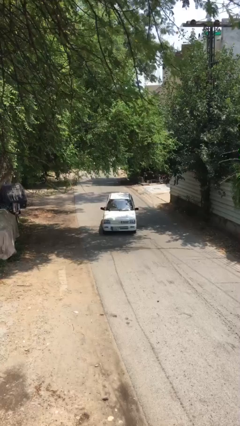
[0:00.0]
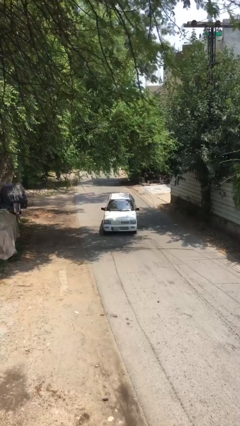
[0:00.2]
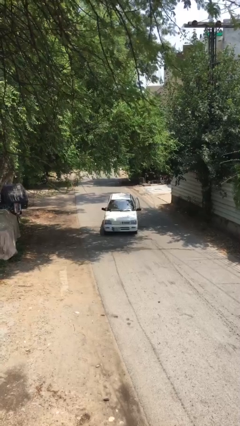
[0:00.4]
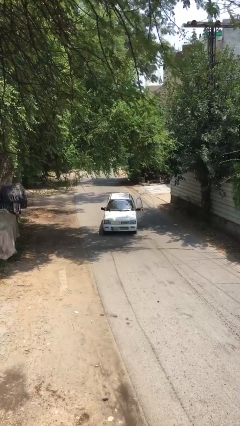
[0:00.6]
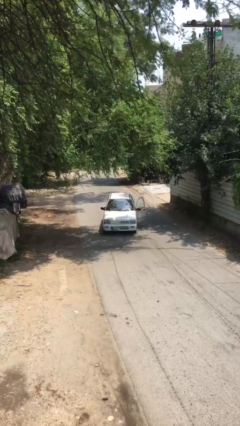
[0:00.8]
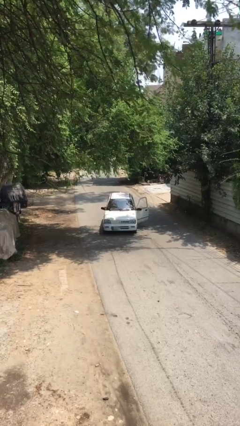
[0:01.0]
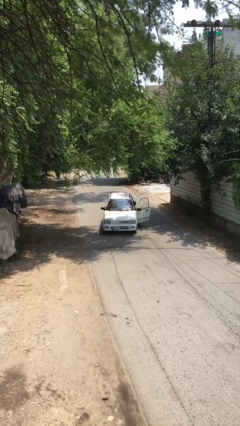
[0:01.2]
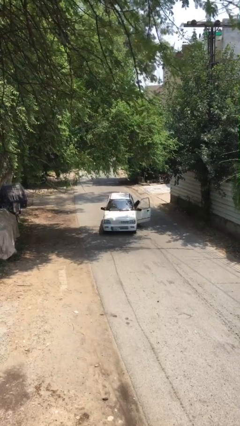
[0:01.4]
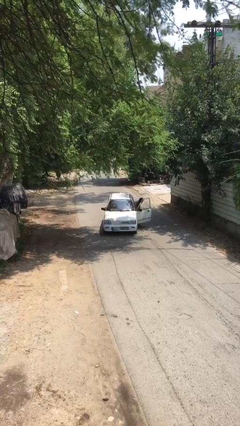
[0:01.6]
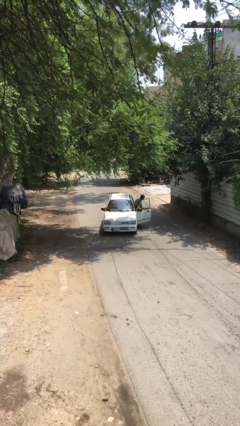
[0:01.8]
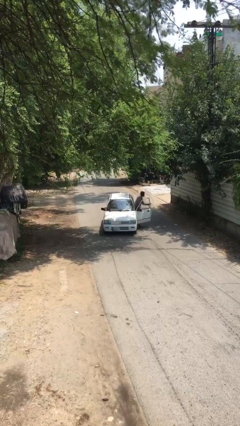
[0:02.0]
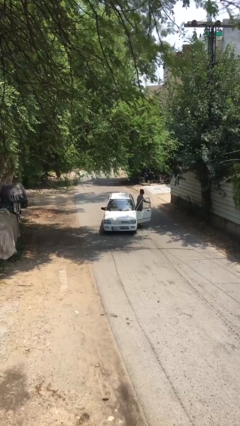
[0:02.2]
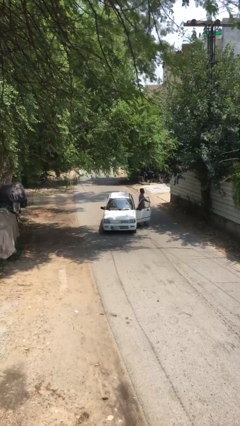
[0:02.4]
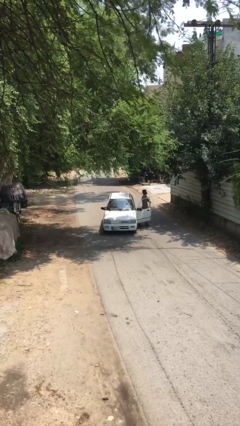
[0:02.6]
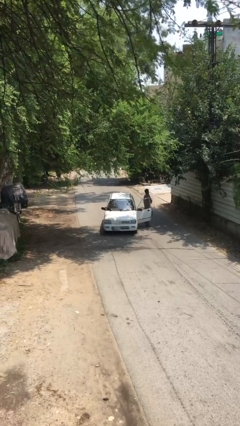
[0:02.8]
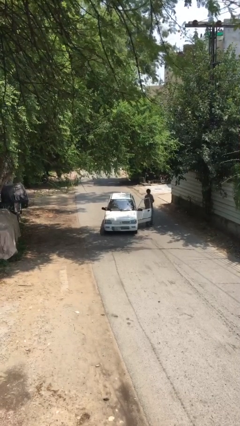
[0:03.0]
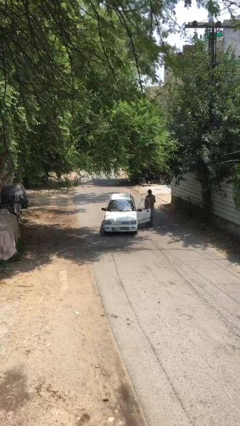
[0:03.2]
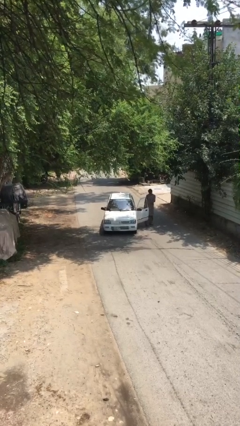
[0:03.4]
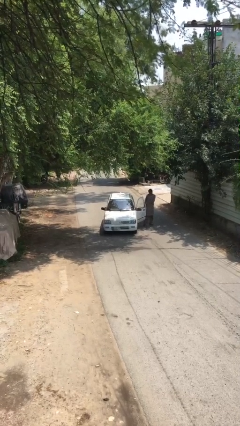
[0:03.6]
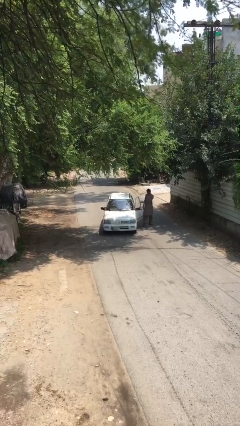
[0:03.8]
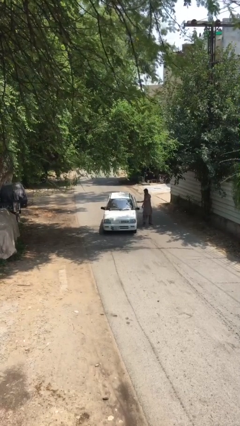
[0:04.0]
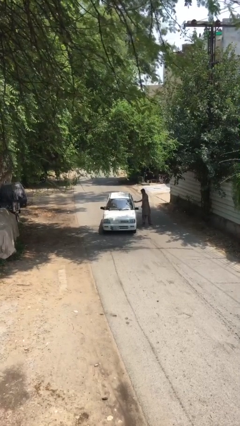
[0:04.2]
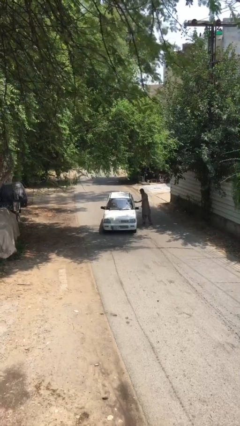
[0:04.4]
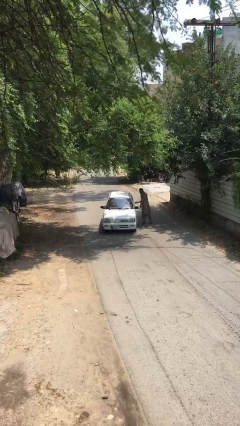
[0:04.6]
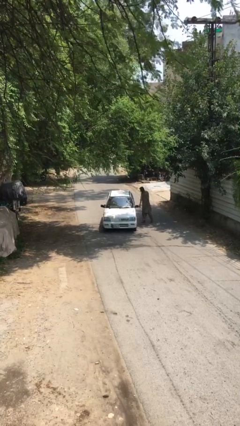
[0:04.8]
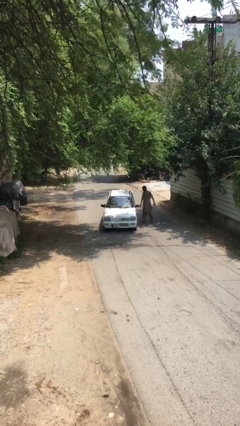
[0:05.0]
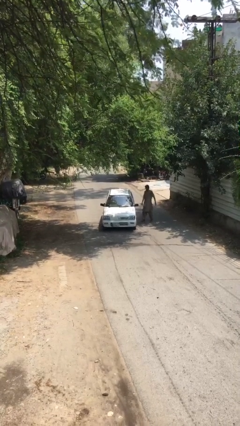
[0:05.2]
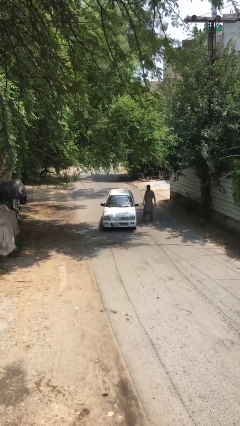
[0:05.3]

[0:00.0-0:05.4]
car drops off person

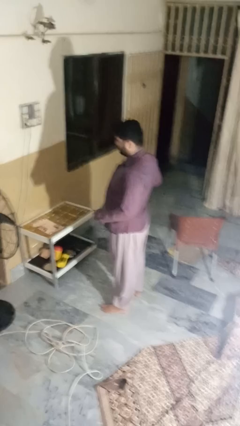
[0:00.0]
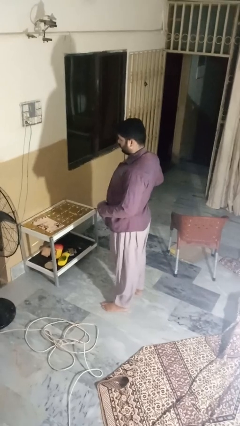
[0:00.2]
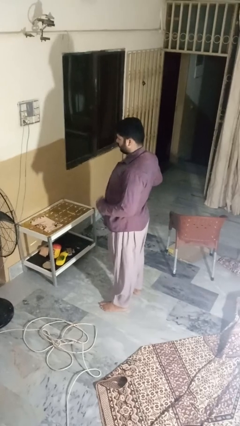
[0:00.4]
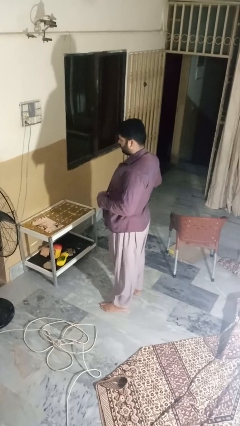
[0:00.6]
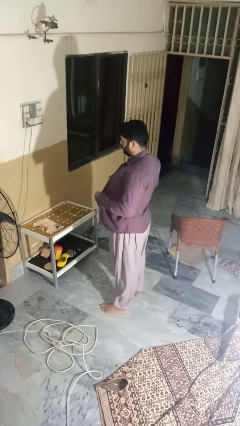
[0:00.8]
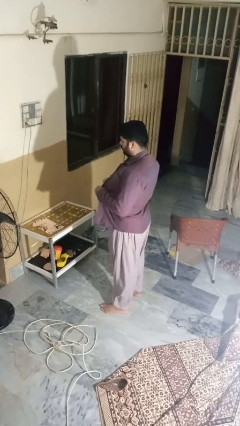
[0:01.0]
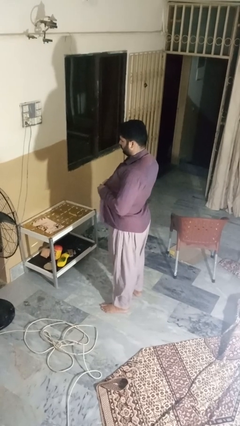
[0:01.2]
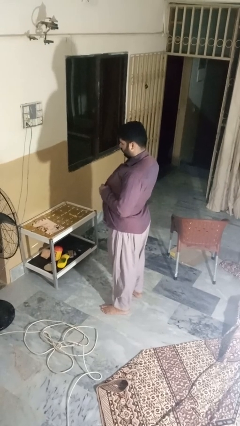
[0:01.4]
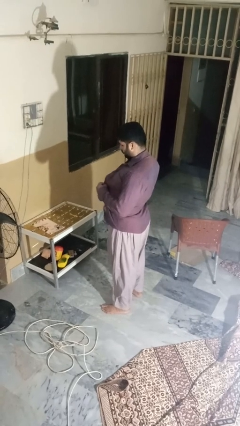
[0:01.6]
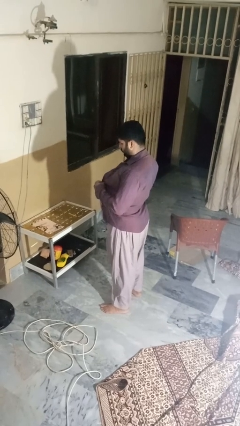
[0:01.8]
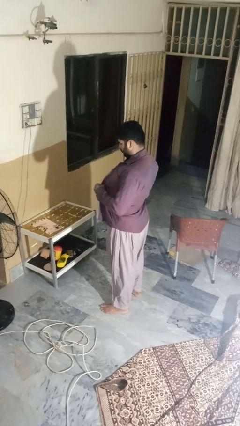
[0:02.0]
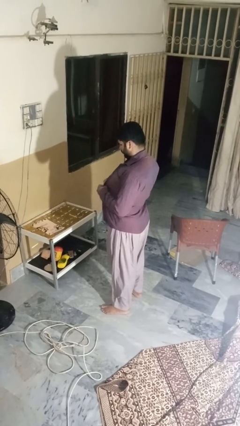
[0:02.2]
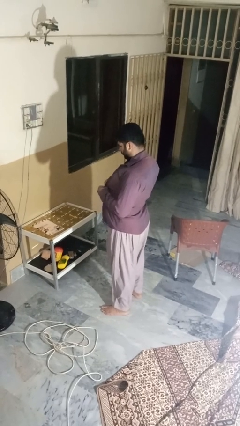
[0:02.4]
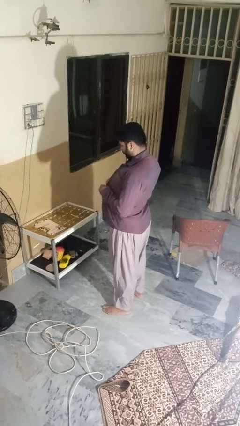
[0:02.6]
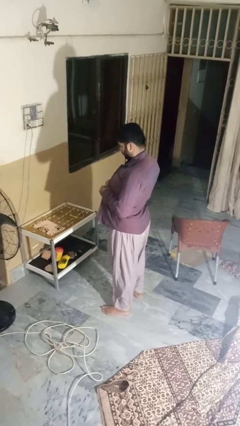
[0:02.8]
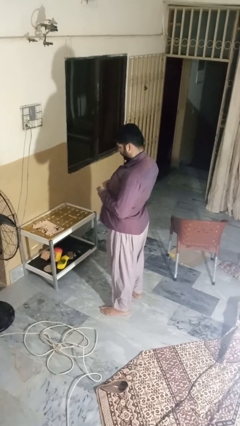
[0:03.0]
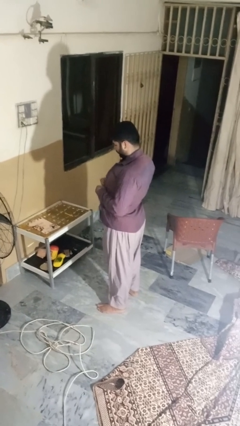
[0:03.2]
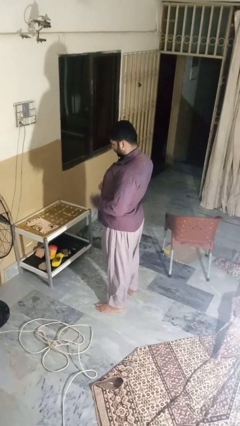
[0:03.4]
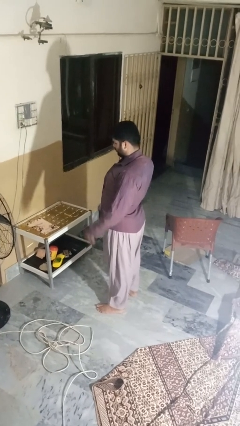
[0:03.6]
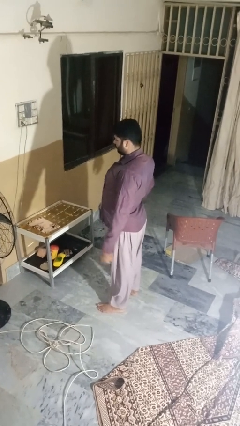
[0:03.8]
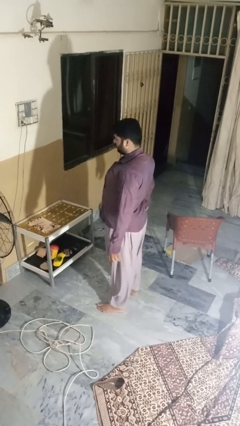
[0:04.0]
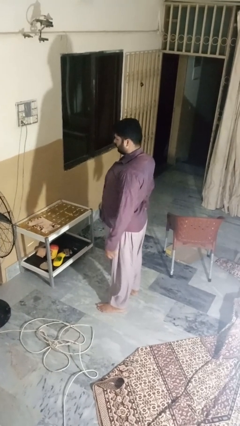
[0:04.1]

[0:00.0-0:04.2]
person buttons shirt

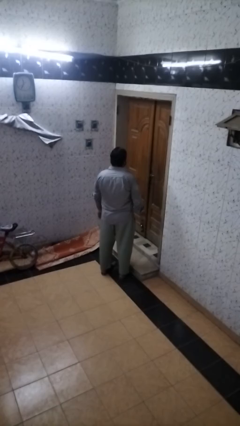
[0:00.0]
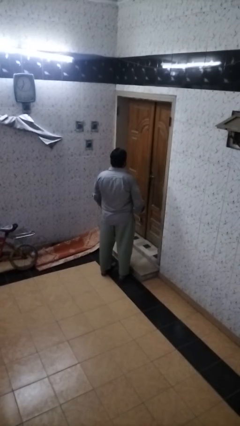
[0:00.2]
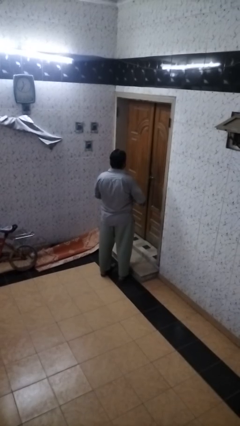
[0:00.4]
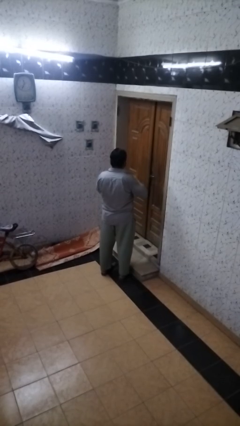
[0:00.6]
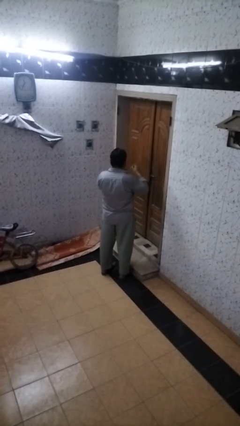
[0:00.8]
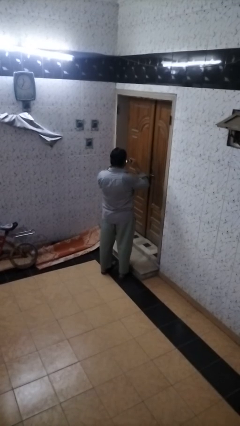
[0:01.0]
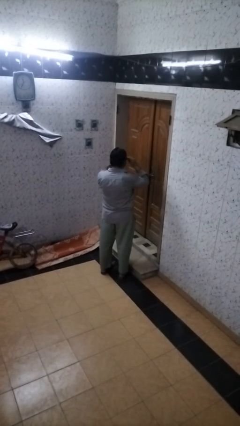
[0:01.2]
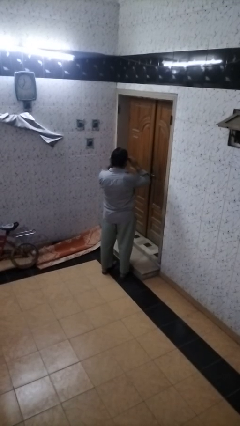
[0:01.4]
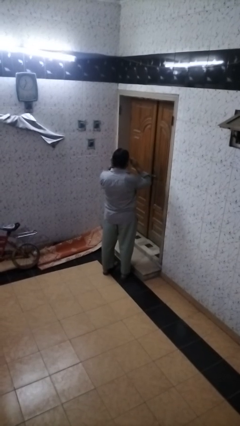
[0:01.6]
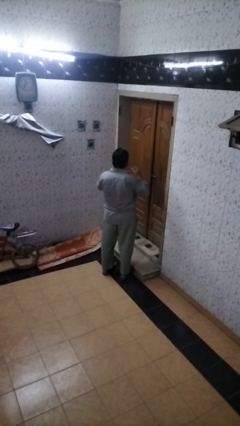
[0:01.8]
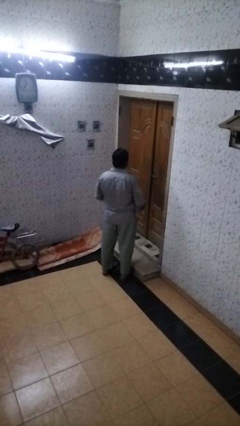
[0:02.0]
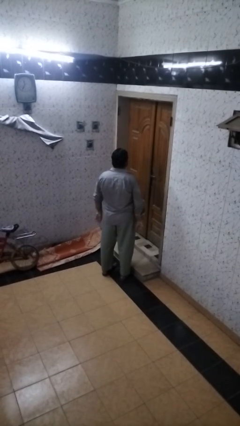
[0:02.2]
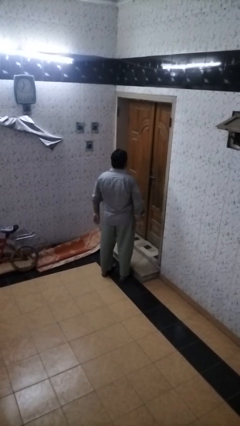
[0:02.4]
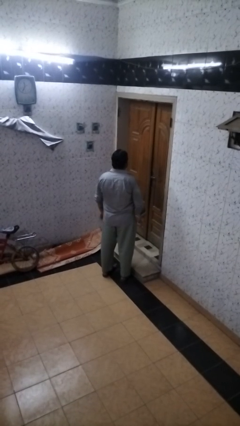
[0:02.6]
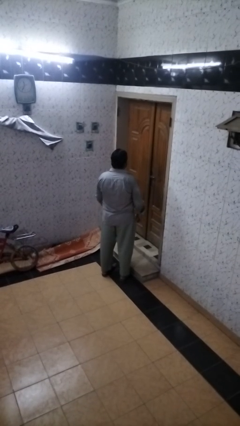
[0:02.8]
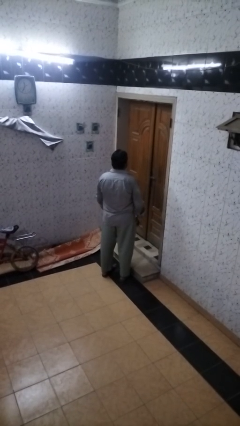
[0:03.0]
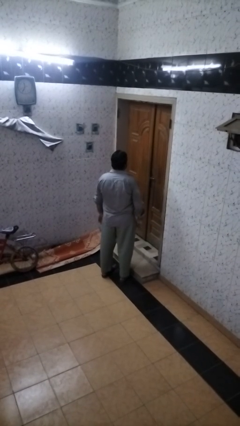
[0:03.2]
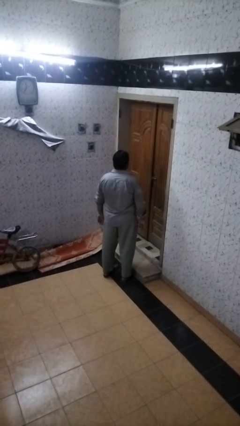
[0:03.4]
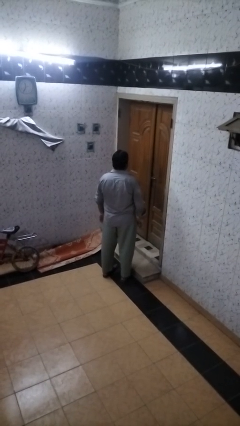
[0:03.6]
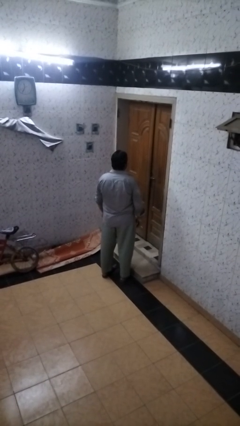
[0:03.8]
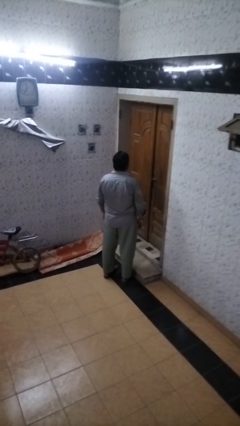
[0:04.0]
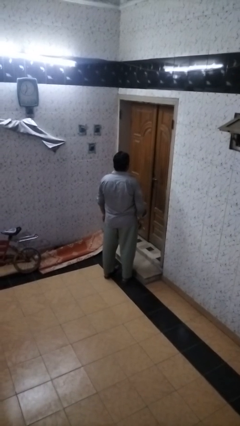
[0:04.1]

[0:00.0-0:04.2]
person puts on sunglasses

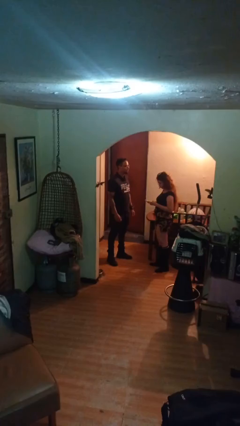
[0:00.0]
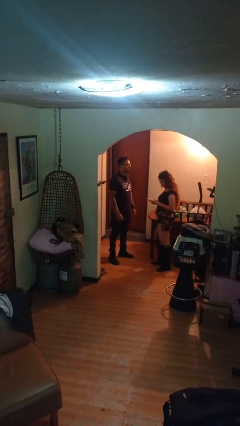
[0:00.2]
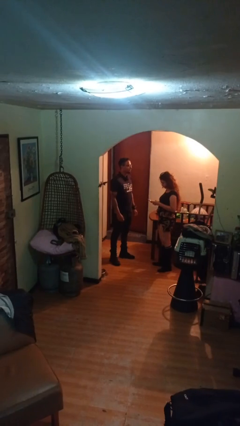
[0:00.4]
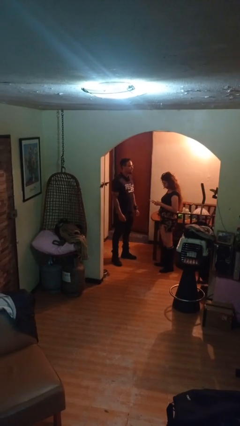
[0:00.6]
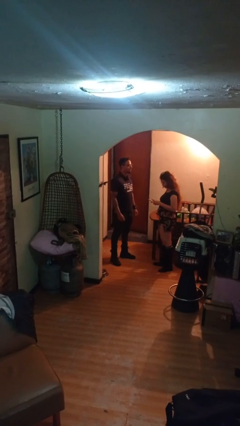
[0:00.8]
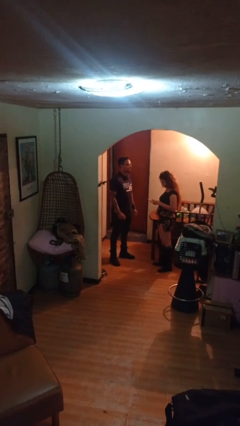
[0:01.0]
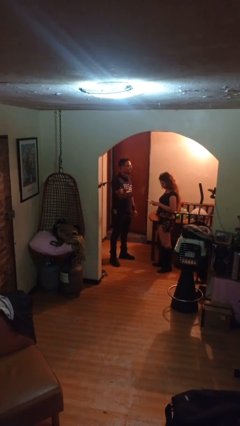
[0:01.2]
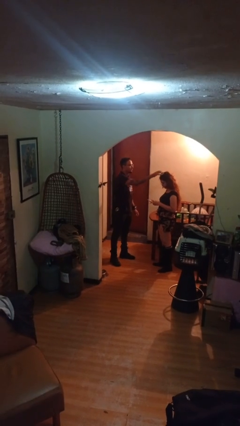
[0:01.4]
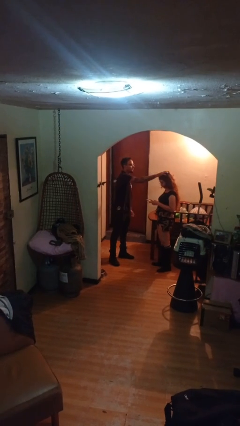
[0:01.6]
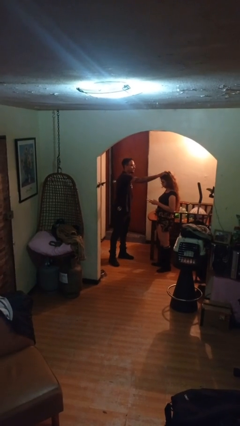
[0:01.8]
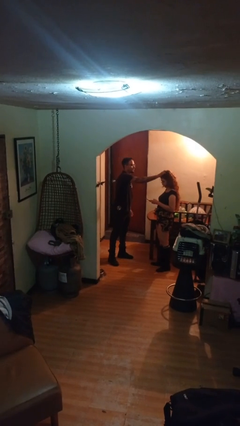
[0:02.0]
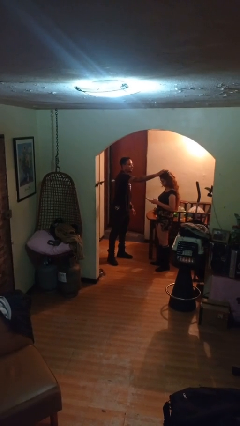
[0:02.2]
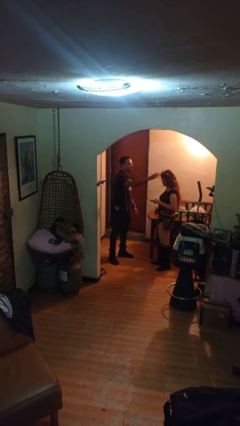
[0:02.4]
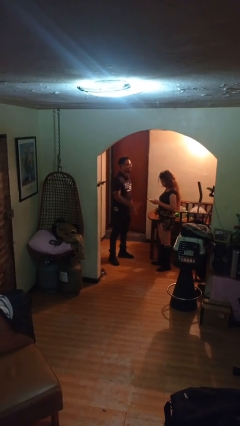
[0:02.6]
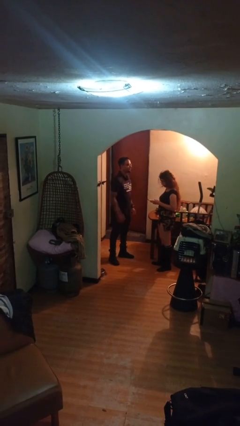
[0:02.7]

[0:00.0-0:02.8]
person picks up object from table

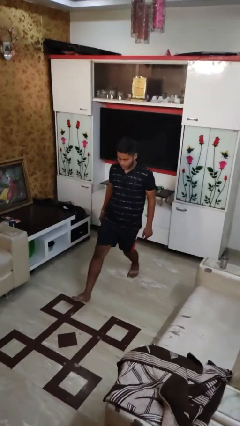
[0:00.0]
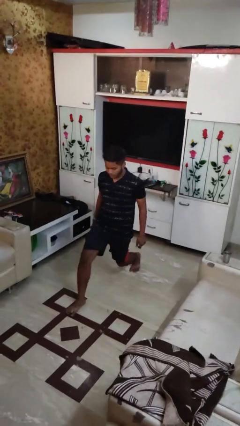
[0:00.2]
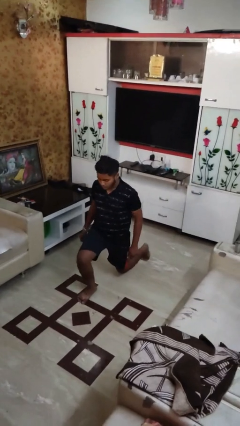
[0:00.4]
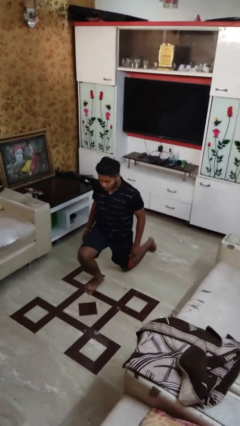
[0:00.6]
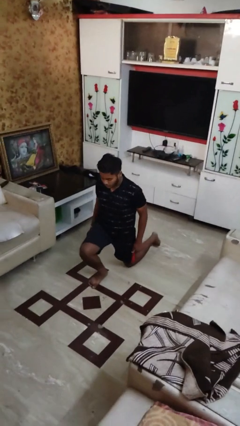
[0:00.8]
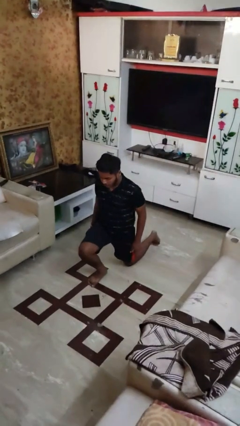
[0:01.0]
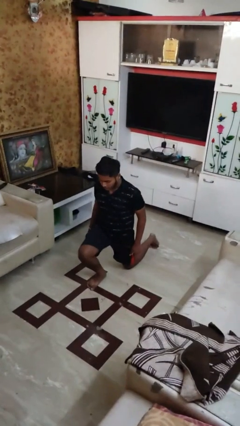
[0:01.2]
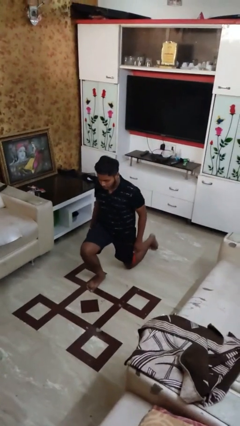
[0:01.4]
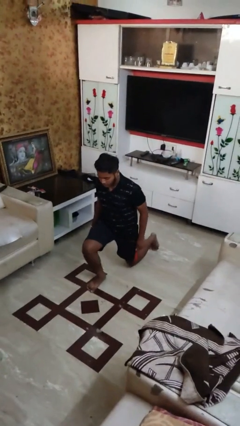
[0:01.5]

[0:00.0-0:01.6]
person exercises with lunges
